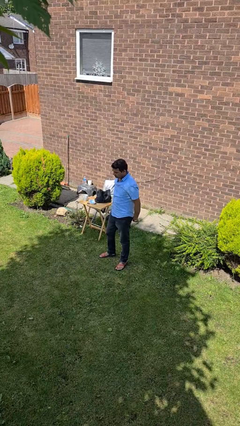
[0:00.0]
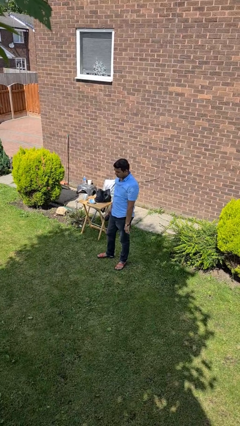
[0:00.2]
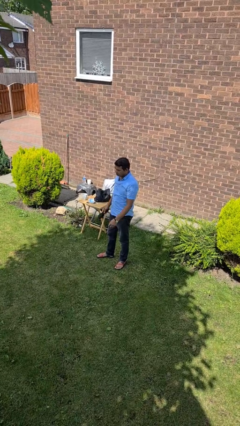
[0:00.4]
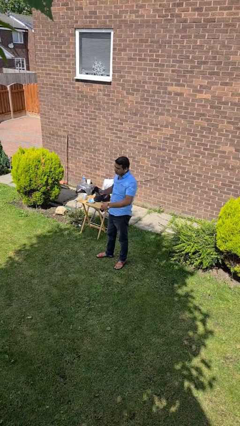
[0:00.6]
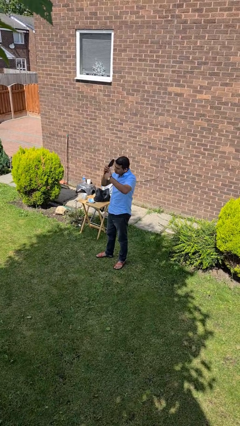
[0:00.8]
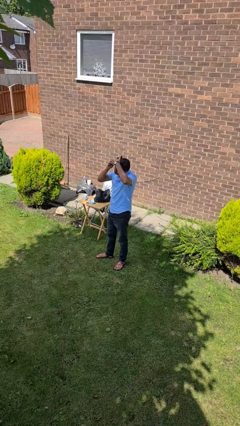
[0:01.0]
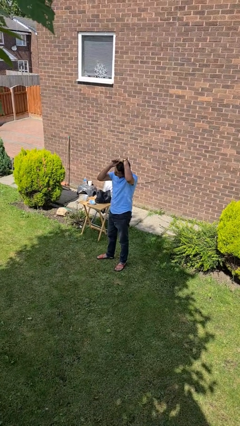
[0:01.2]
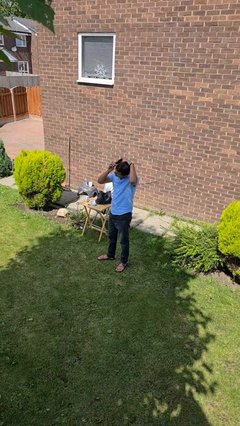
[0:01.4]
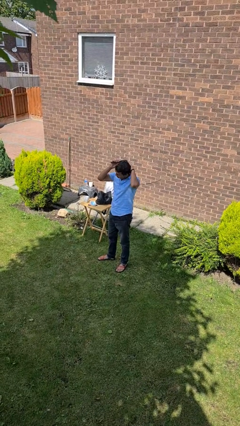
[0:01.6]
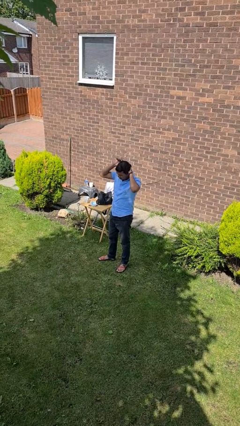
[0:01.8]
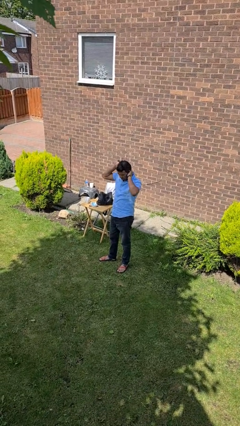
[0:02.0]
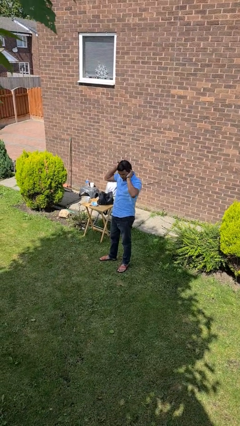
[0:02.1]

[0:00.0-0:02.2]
person brushes hair

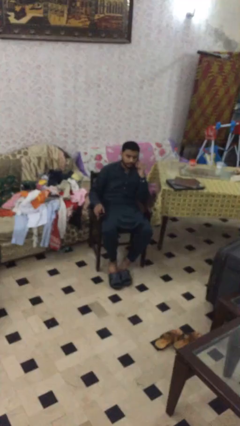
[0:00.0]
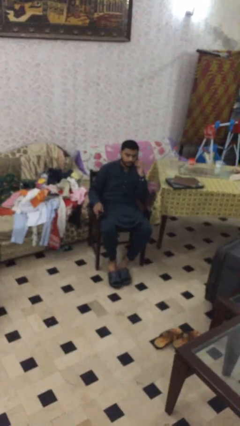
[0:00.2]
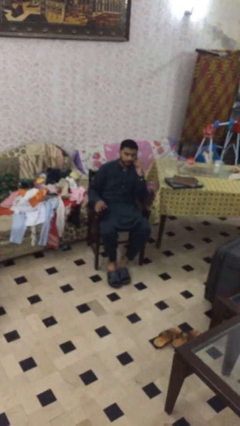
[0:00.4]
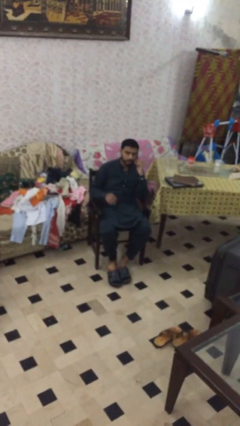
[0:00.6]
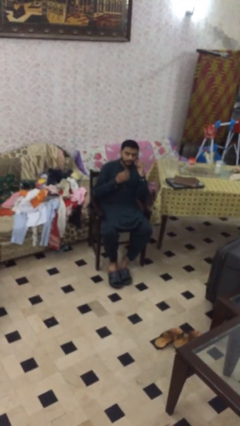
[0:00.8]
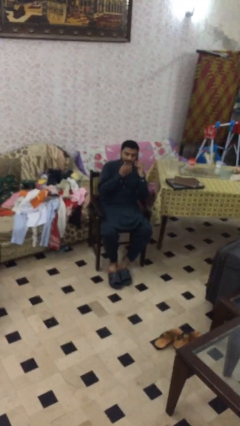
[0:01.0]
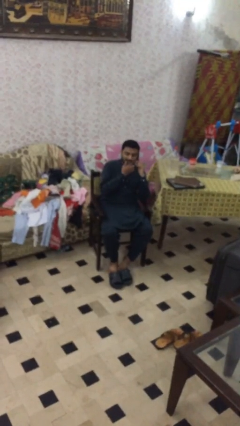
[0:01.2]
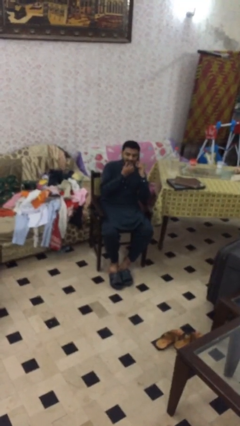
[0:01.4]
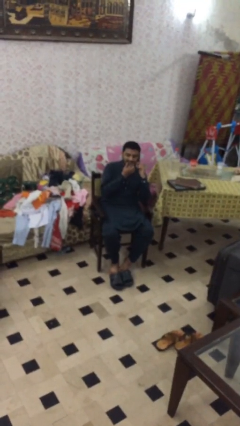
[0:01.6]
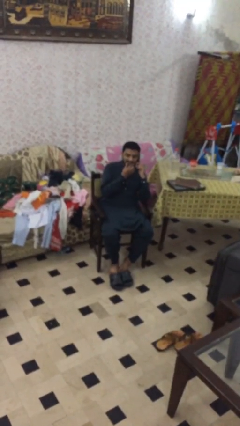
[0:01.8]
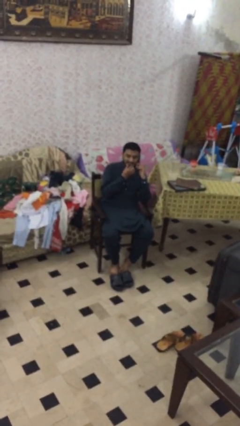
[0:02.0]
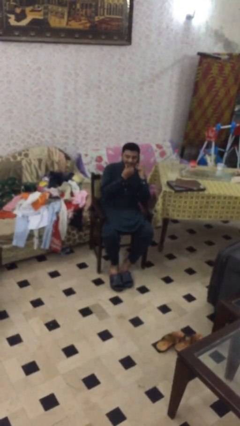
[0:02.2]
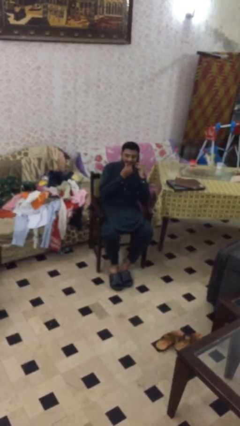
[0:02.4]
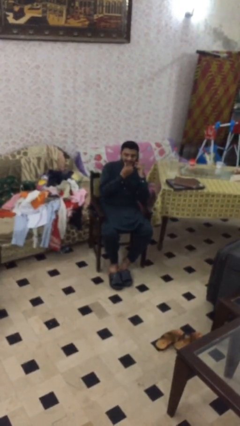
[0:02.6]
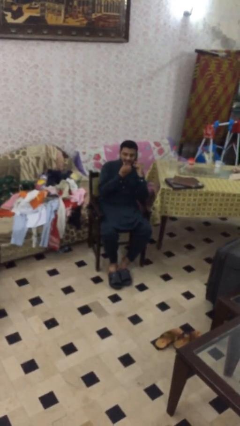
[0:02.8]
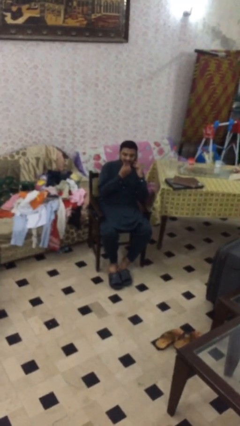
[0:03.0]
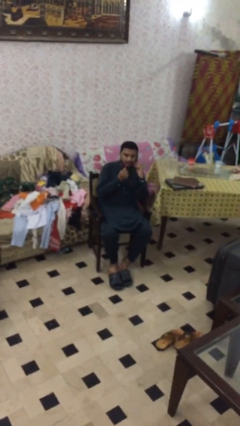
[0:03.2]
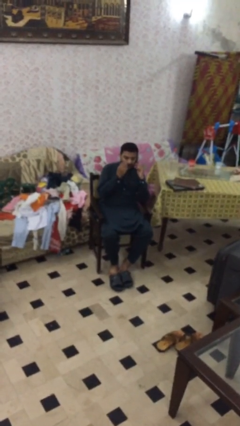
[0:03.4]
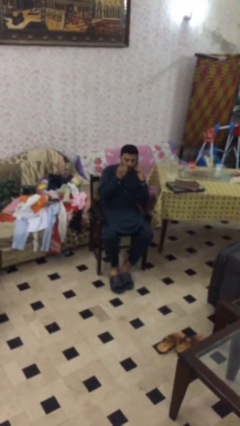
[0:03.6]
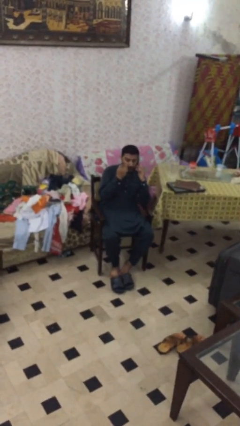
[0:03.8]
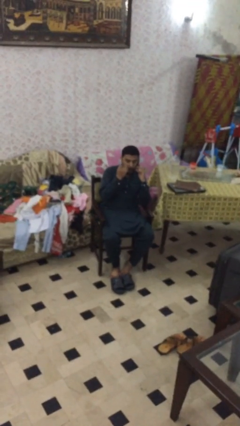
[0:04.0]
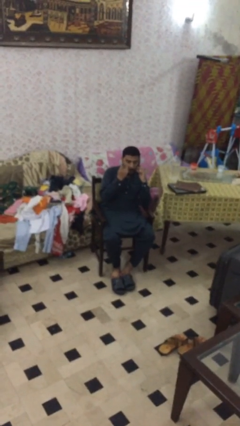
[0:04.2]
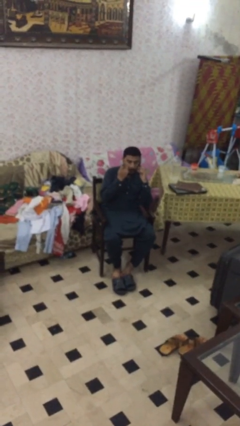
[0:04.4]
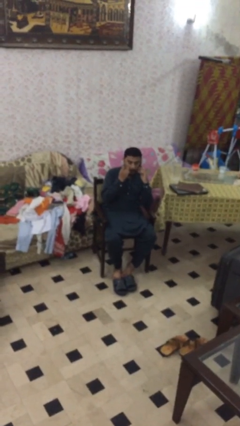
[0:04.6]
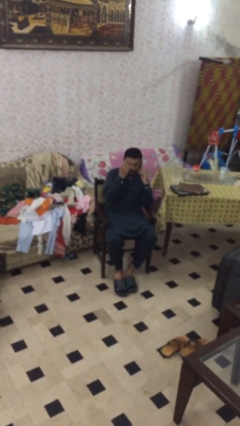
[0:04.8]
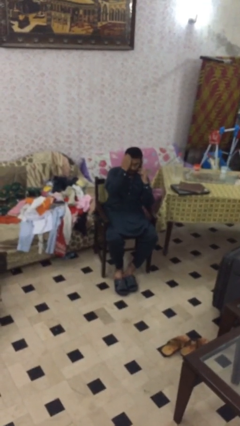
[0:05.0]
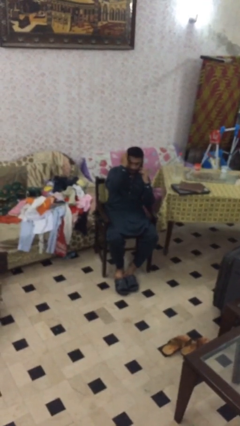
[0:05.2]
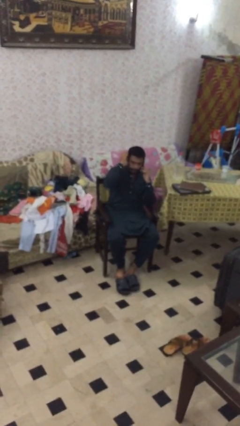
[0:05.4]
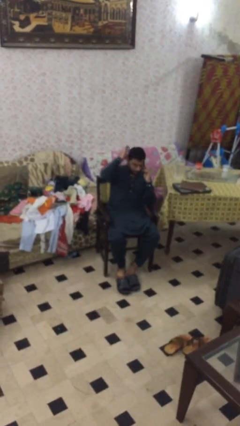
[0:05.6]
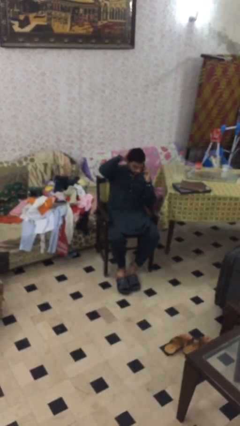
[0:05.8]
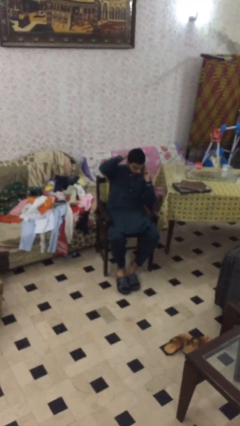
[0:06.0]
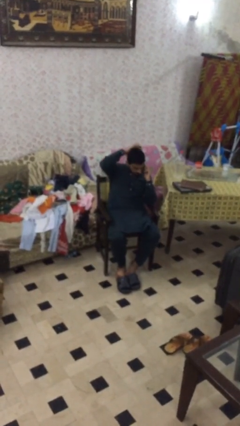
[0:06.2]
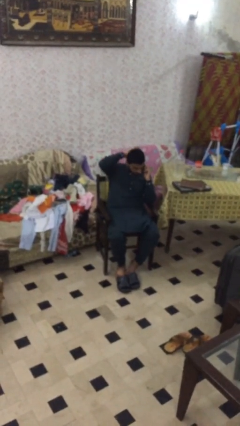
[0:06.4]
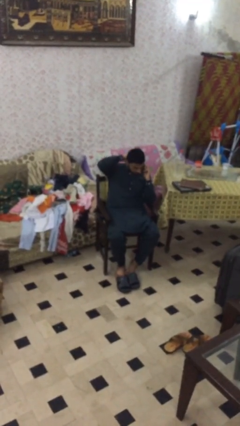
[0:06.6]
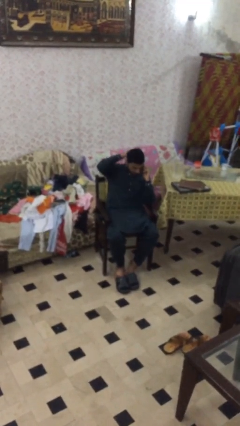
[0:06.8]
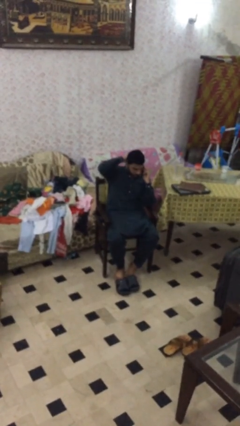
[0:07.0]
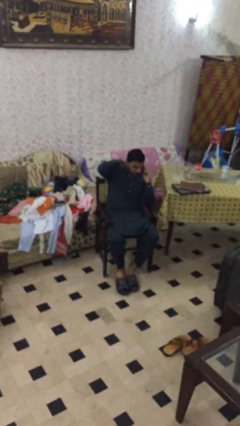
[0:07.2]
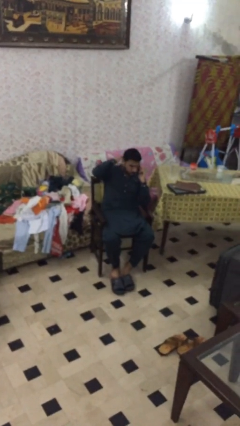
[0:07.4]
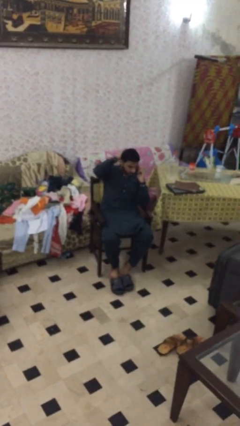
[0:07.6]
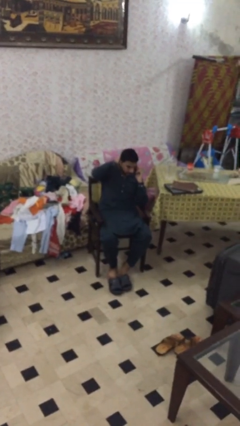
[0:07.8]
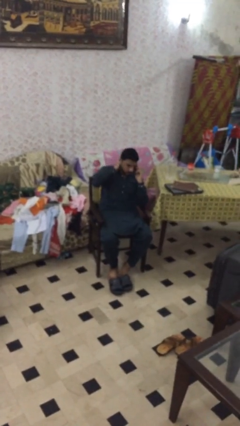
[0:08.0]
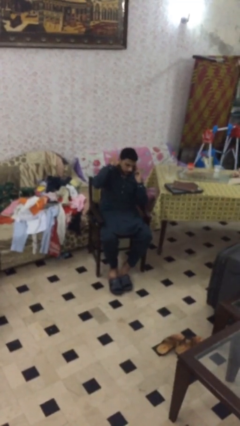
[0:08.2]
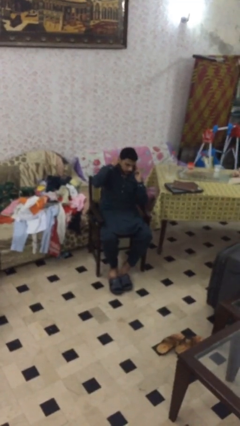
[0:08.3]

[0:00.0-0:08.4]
person talks on phone

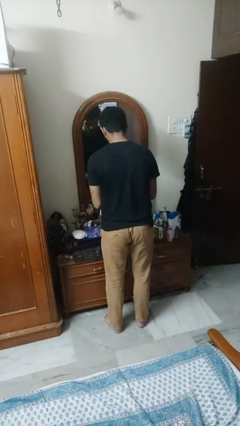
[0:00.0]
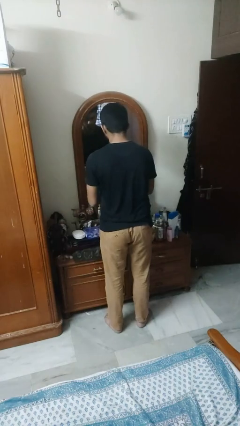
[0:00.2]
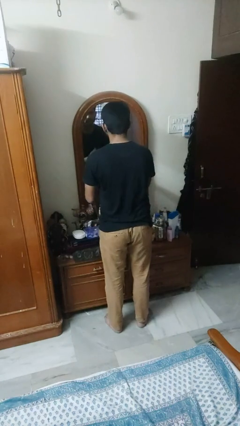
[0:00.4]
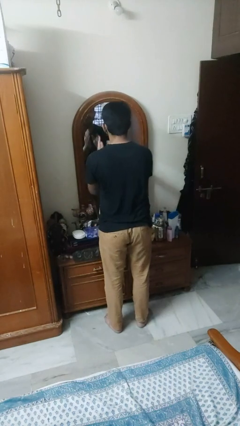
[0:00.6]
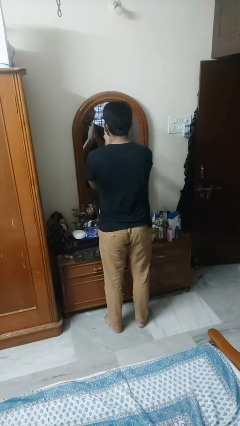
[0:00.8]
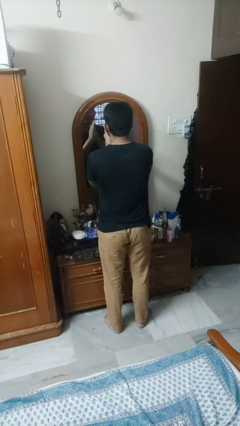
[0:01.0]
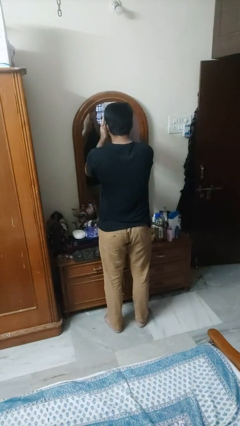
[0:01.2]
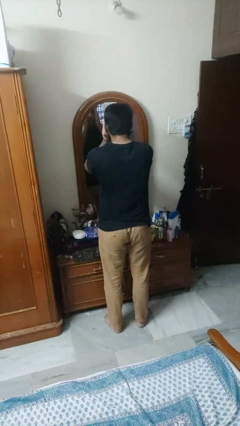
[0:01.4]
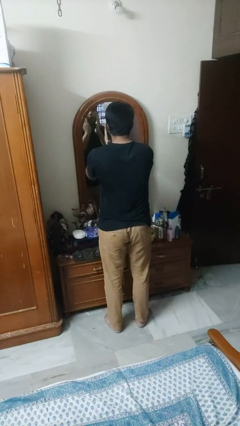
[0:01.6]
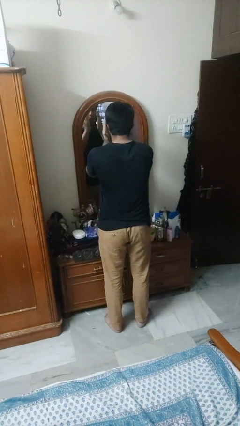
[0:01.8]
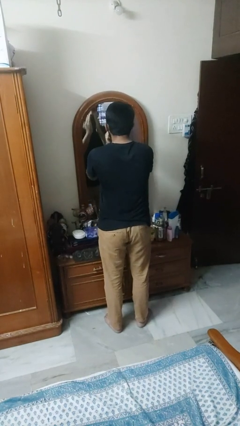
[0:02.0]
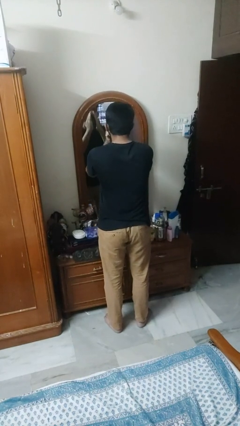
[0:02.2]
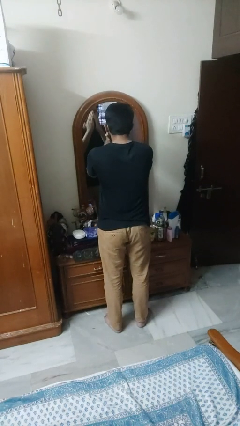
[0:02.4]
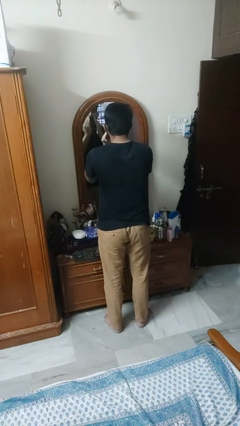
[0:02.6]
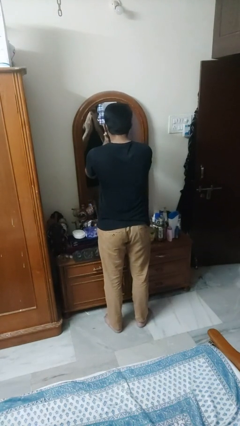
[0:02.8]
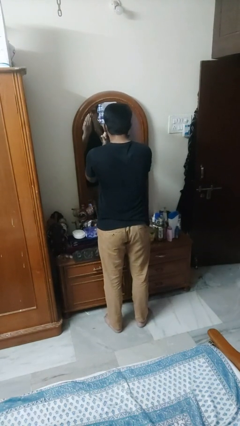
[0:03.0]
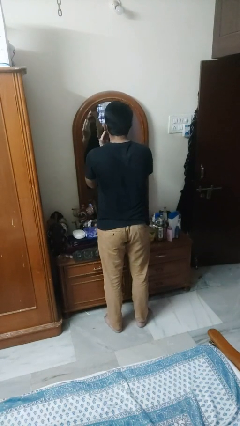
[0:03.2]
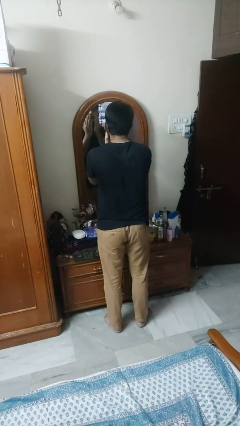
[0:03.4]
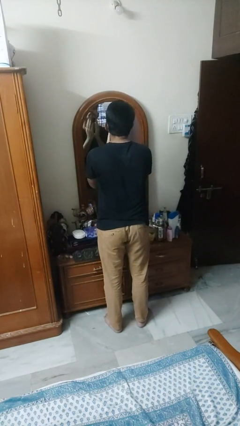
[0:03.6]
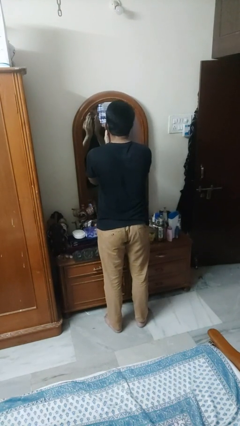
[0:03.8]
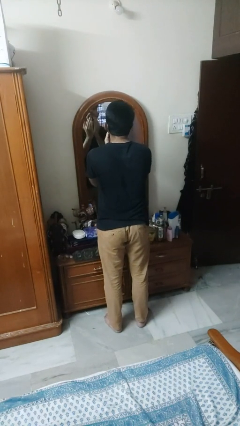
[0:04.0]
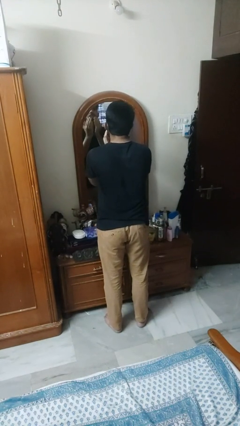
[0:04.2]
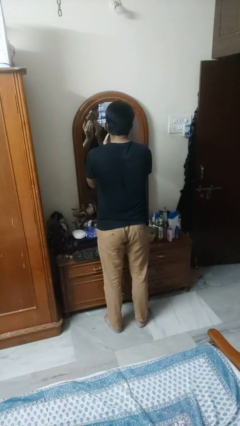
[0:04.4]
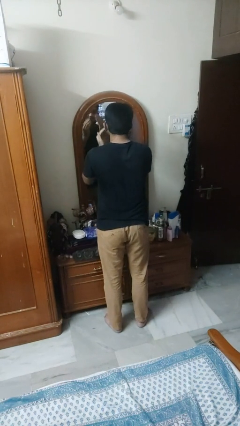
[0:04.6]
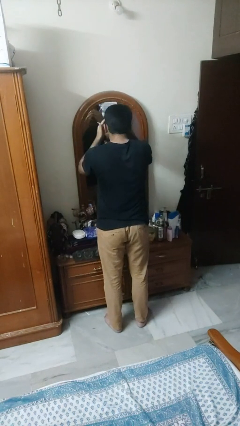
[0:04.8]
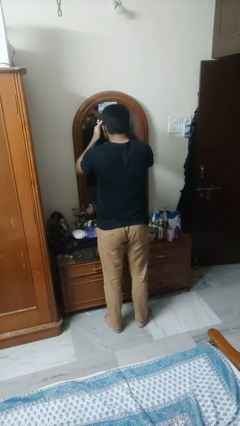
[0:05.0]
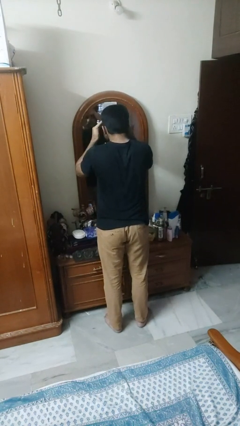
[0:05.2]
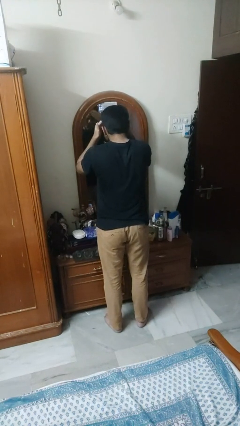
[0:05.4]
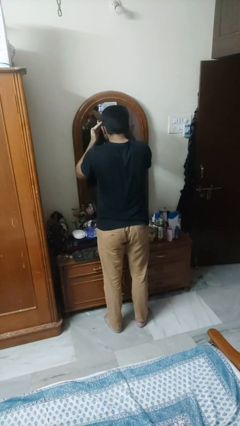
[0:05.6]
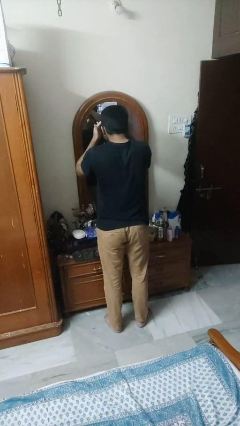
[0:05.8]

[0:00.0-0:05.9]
person applies sunscreen

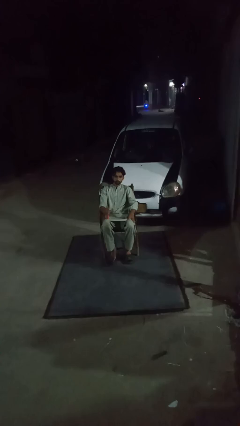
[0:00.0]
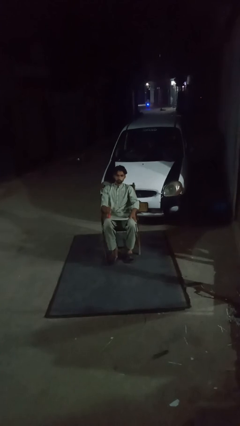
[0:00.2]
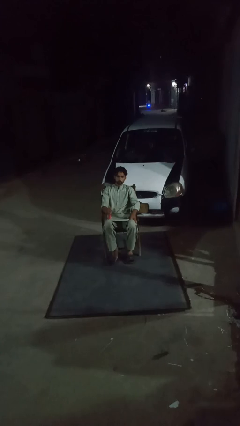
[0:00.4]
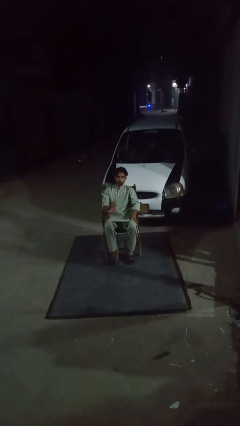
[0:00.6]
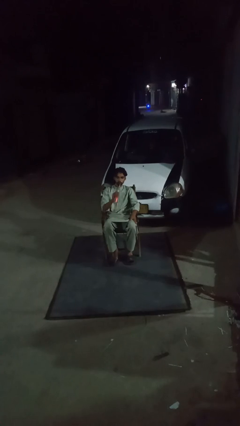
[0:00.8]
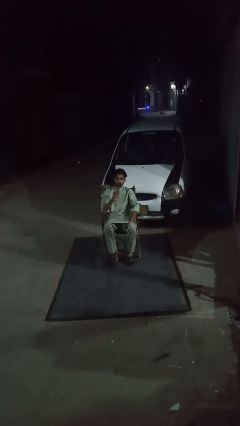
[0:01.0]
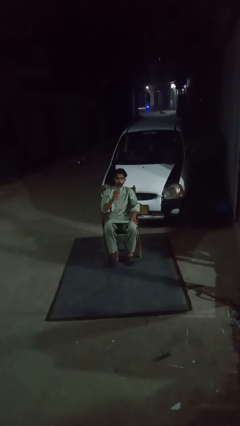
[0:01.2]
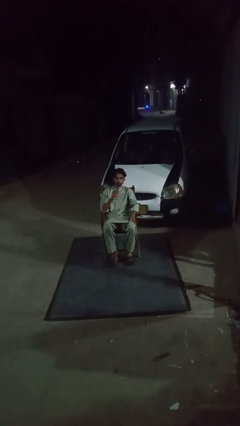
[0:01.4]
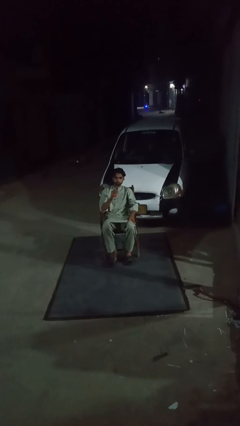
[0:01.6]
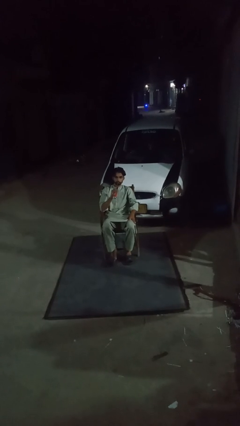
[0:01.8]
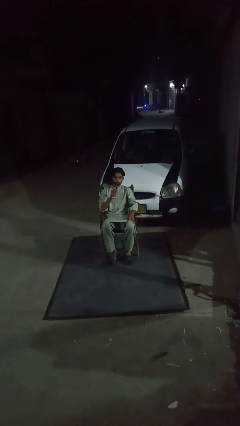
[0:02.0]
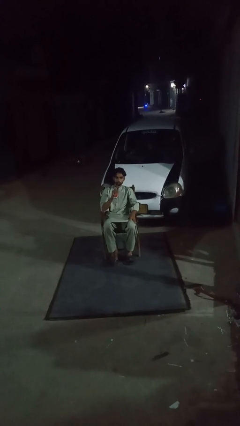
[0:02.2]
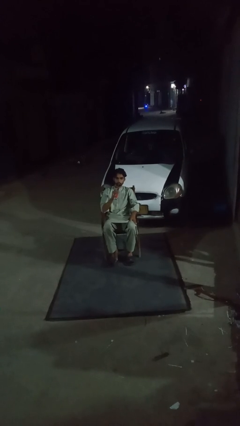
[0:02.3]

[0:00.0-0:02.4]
person drinks from straw
